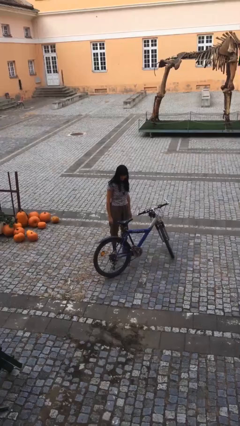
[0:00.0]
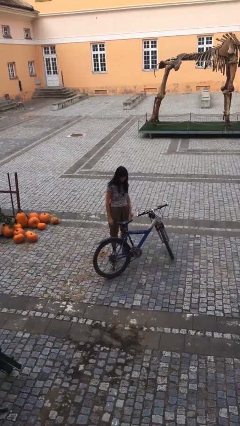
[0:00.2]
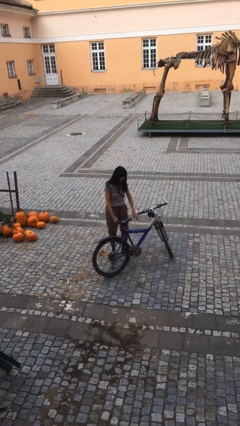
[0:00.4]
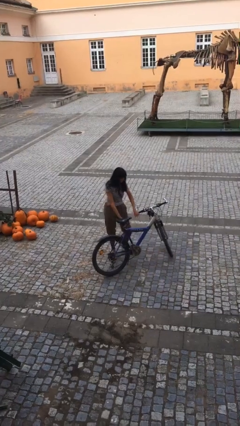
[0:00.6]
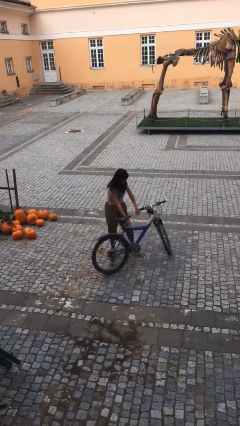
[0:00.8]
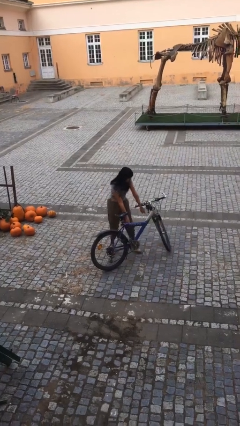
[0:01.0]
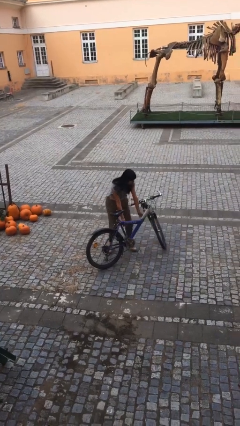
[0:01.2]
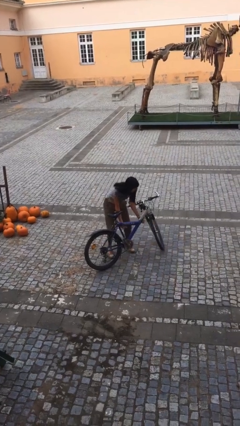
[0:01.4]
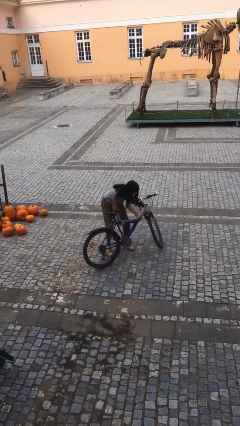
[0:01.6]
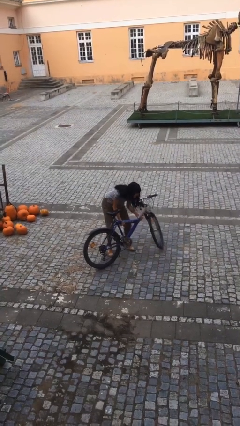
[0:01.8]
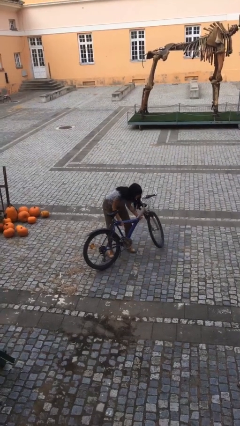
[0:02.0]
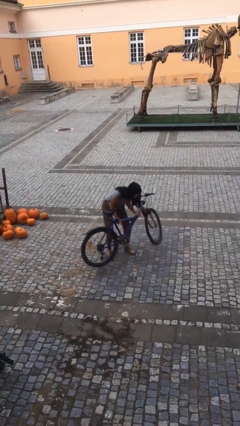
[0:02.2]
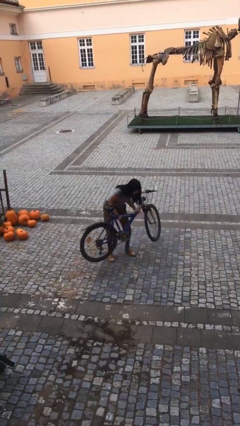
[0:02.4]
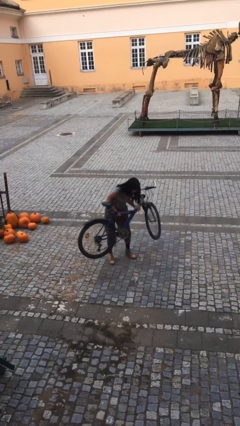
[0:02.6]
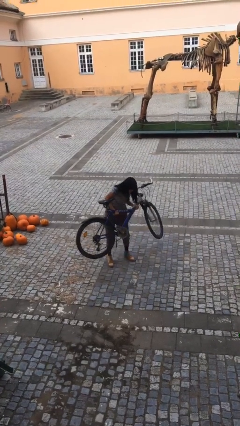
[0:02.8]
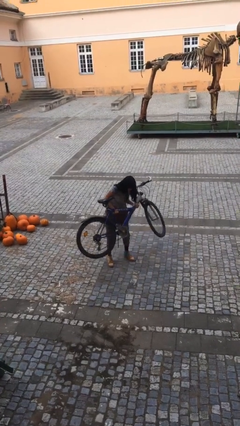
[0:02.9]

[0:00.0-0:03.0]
person picks up object from floor

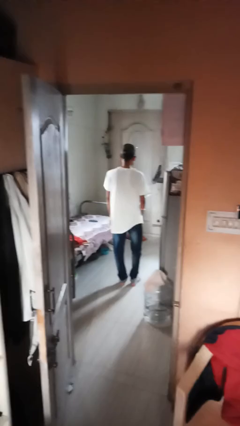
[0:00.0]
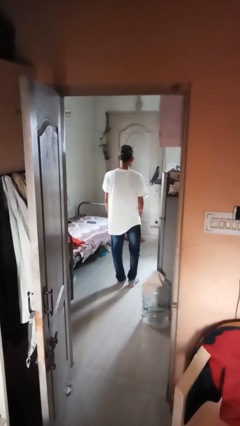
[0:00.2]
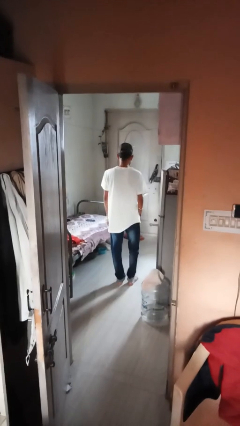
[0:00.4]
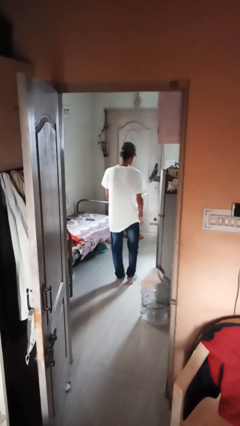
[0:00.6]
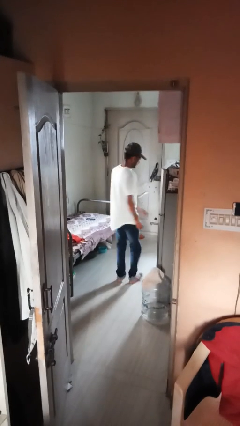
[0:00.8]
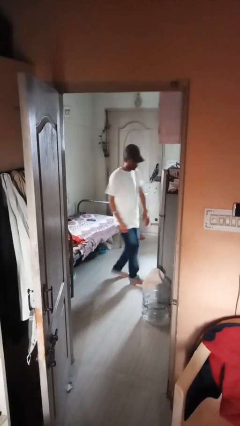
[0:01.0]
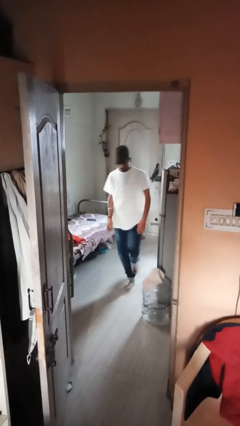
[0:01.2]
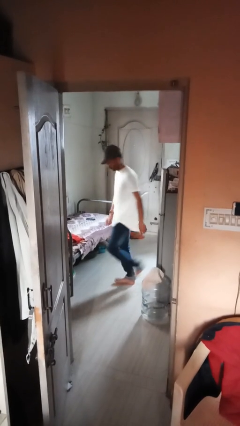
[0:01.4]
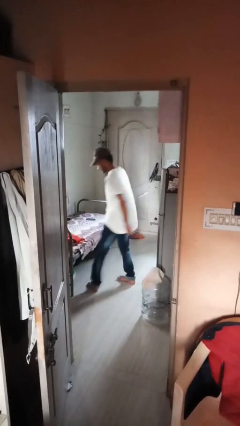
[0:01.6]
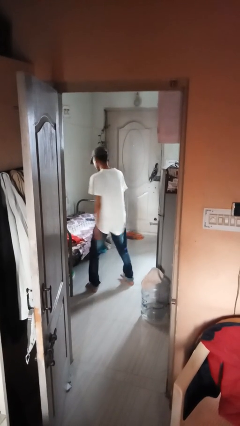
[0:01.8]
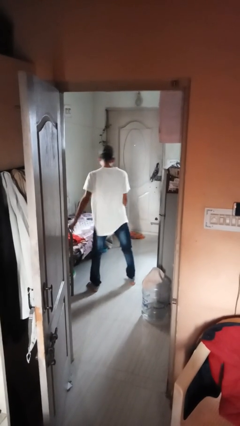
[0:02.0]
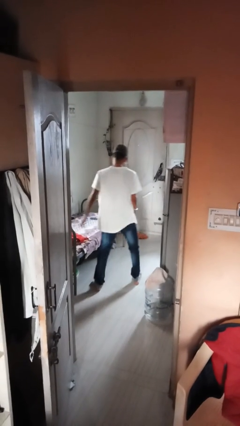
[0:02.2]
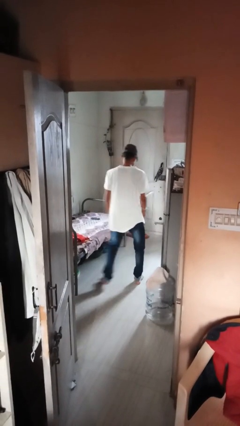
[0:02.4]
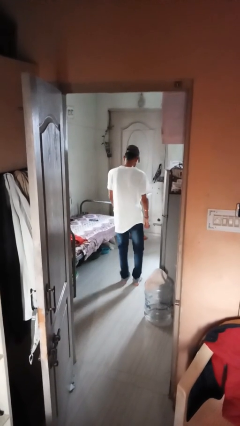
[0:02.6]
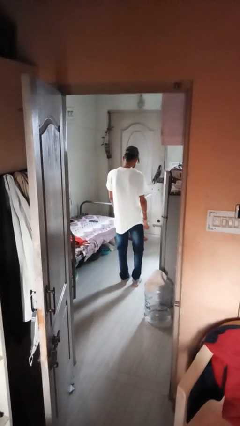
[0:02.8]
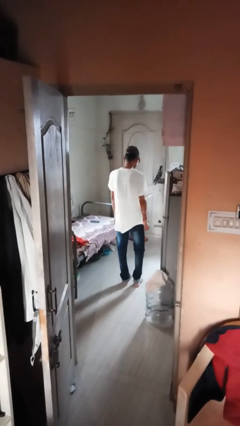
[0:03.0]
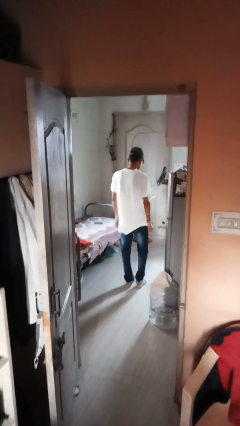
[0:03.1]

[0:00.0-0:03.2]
person twirls

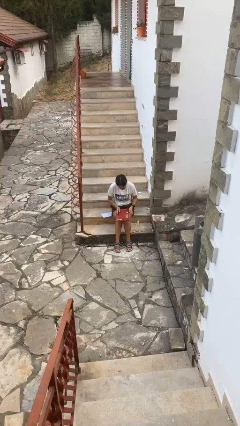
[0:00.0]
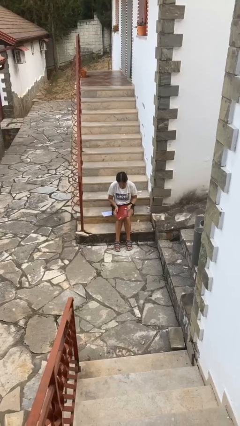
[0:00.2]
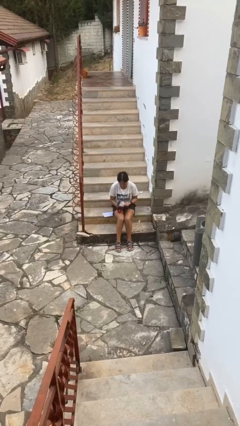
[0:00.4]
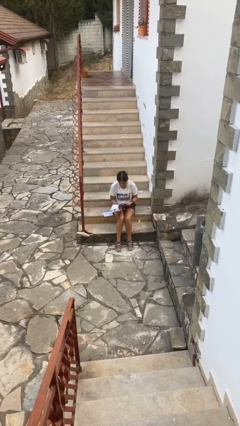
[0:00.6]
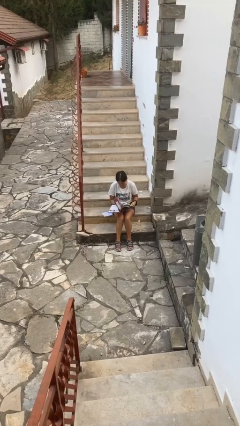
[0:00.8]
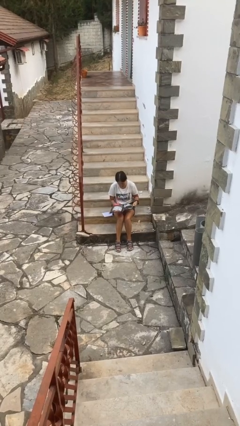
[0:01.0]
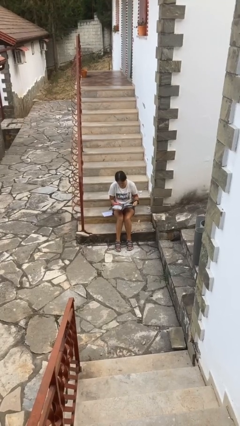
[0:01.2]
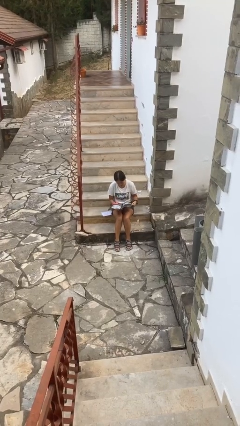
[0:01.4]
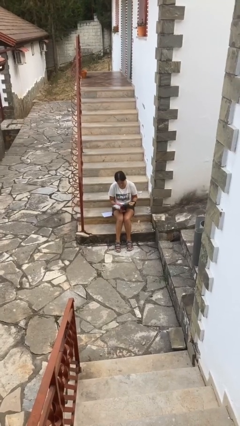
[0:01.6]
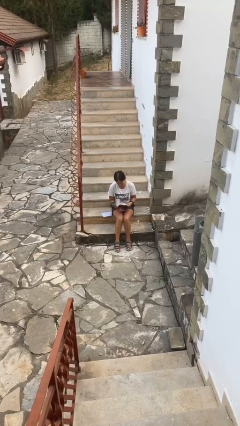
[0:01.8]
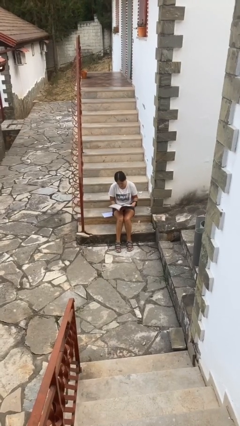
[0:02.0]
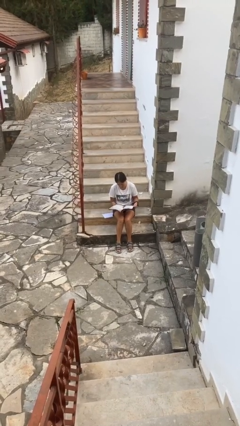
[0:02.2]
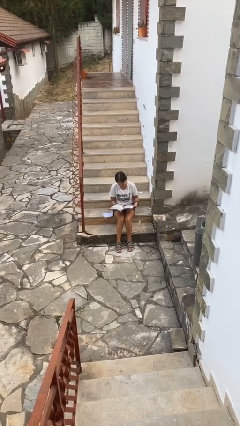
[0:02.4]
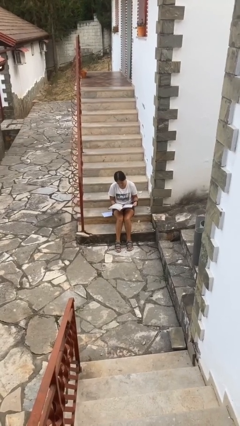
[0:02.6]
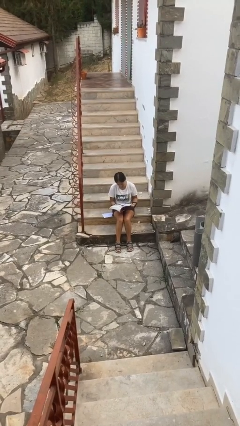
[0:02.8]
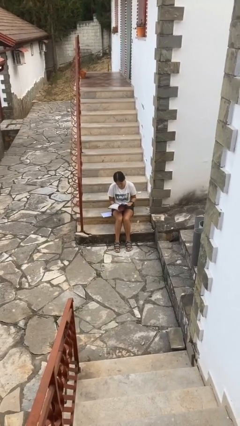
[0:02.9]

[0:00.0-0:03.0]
person reads magazine

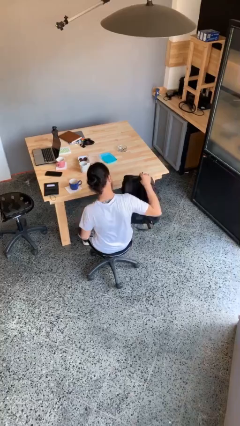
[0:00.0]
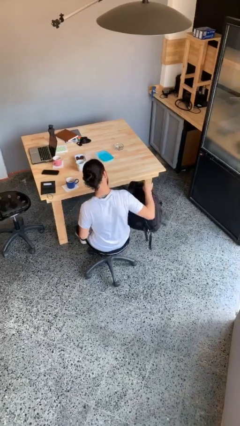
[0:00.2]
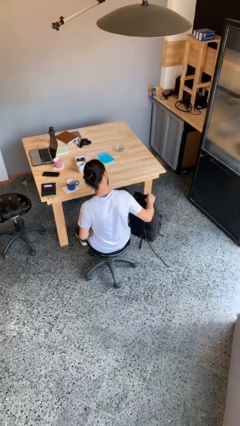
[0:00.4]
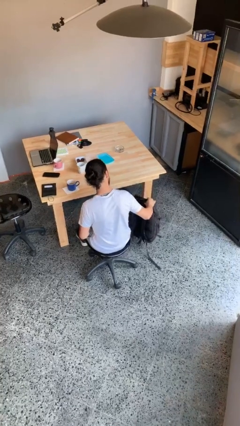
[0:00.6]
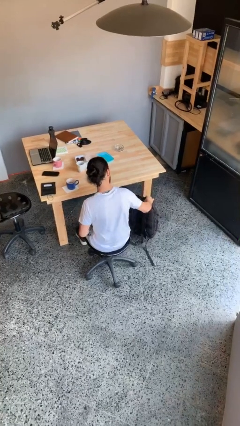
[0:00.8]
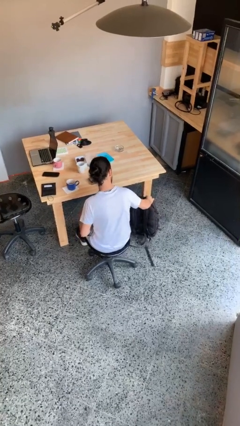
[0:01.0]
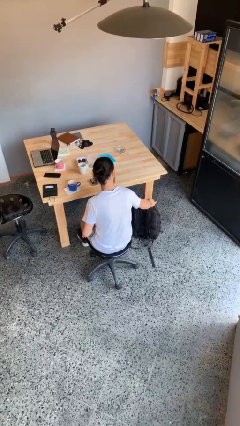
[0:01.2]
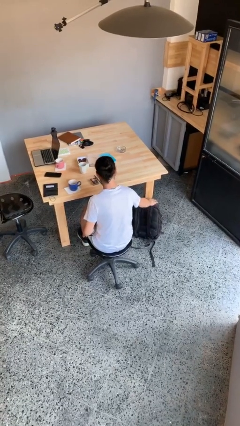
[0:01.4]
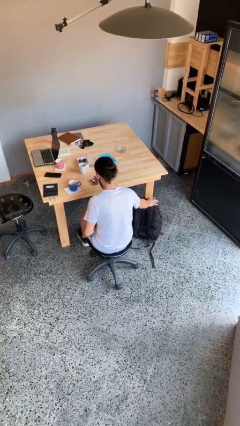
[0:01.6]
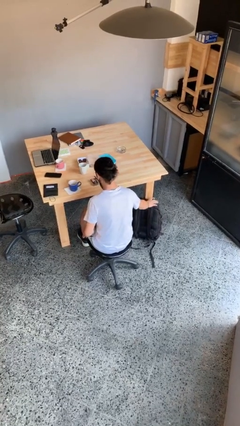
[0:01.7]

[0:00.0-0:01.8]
person puts down object on floor

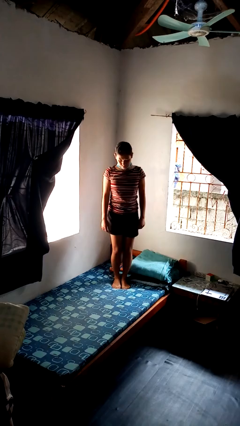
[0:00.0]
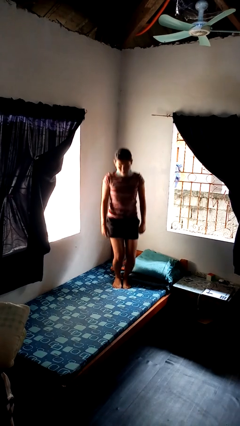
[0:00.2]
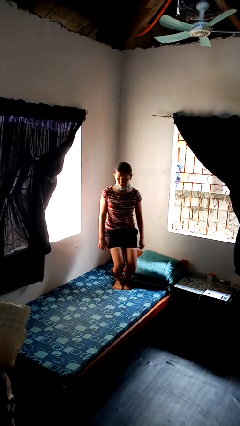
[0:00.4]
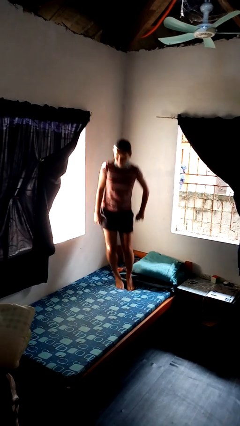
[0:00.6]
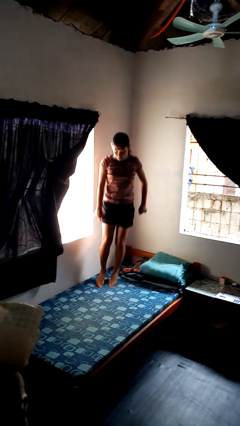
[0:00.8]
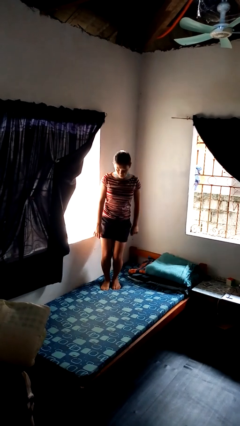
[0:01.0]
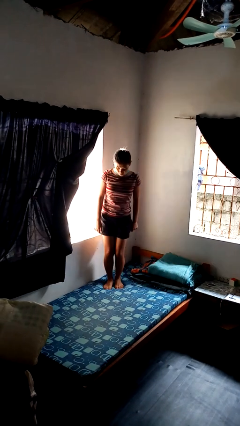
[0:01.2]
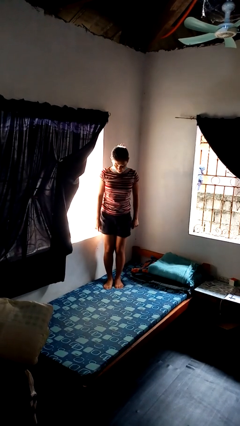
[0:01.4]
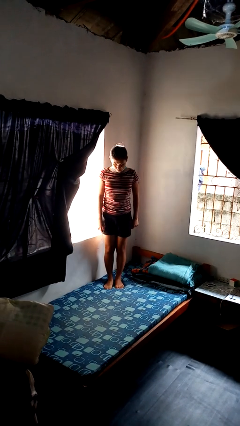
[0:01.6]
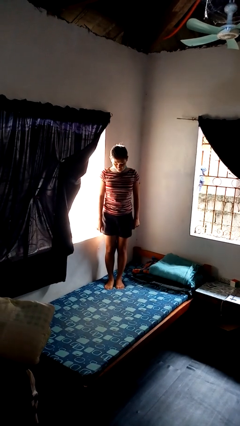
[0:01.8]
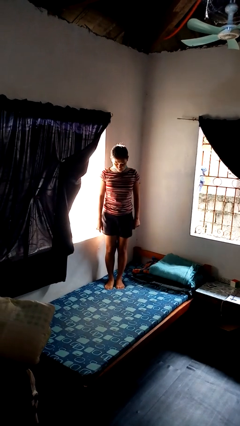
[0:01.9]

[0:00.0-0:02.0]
person jumps on bed

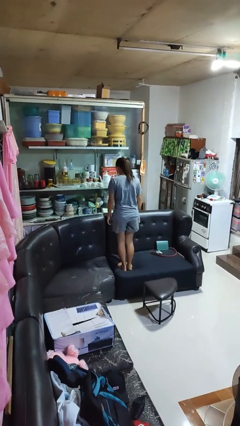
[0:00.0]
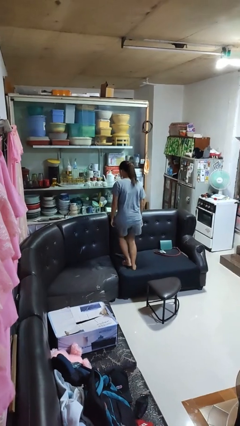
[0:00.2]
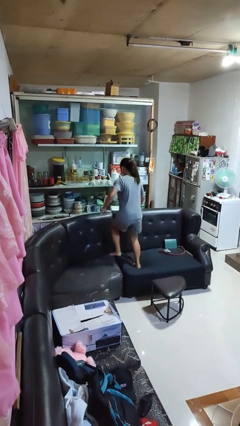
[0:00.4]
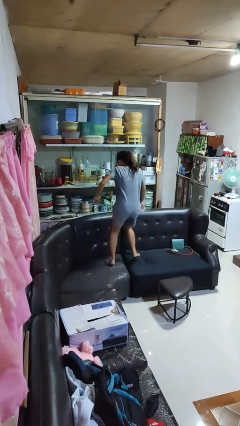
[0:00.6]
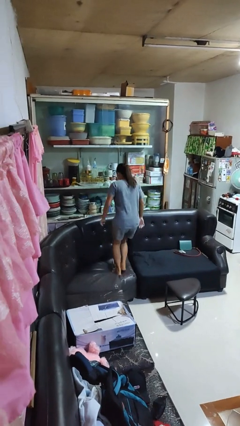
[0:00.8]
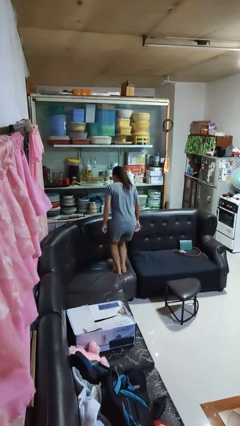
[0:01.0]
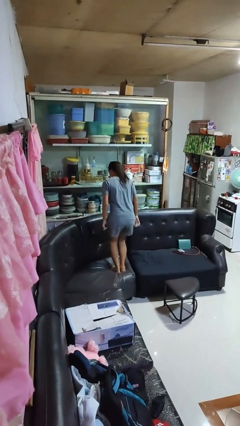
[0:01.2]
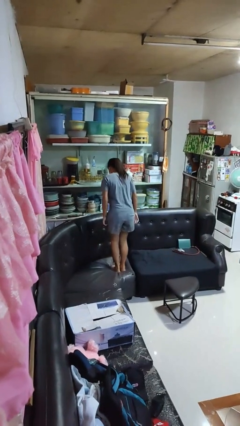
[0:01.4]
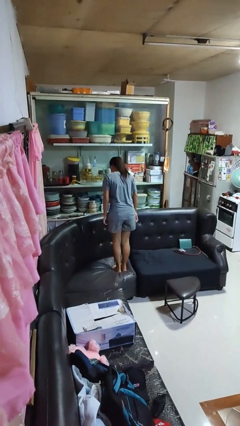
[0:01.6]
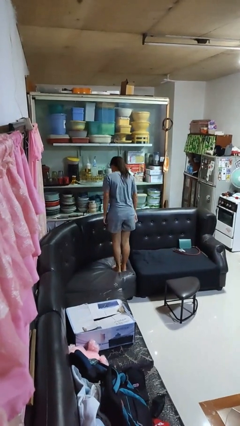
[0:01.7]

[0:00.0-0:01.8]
person jumps on couch

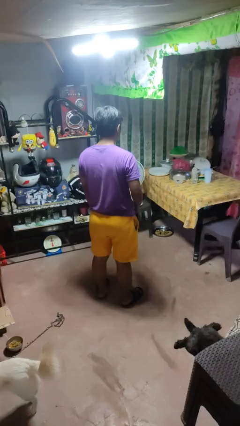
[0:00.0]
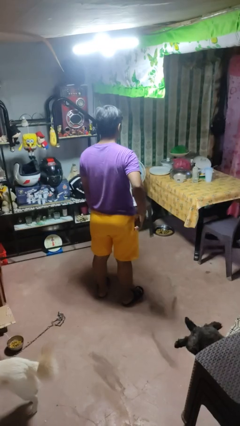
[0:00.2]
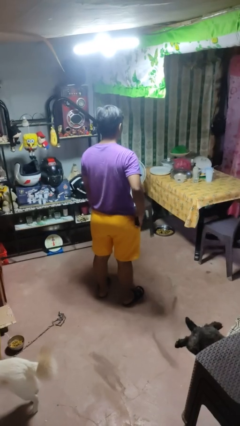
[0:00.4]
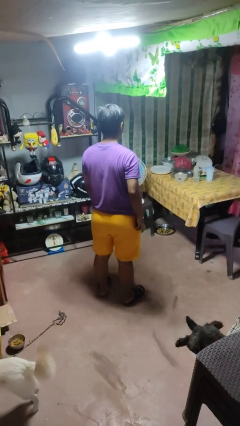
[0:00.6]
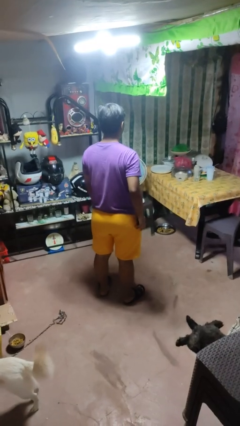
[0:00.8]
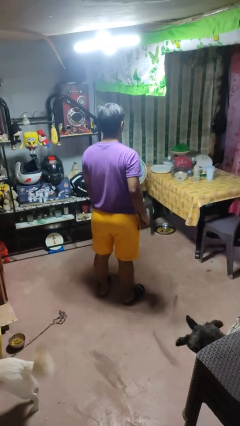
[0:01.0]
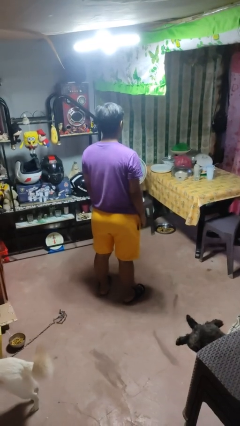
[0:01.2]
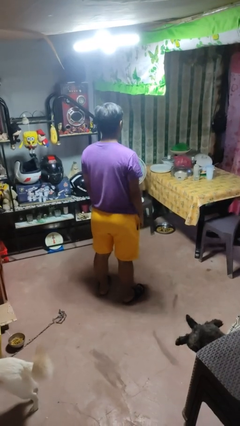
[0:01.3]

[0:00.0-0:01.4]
person puts phone into pocket

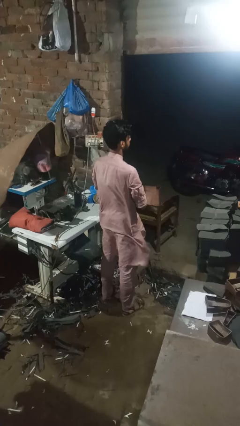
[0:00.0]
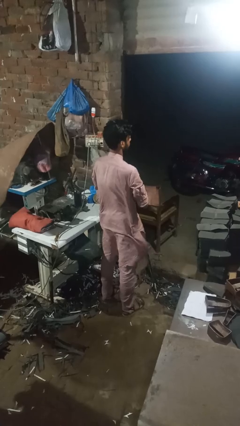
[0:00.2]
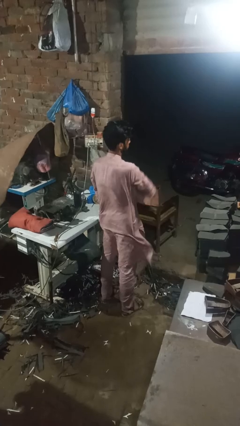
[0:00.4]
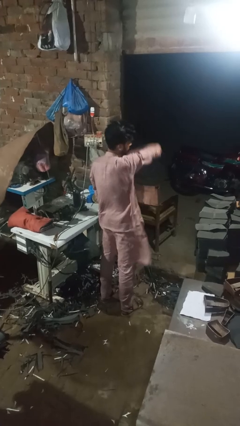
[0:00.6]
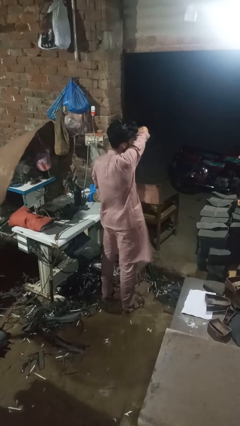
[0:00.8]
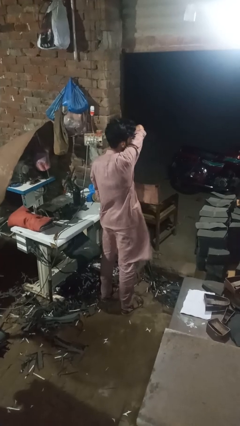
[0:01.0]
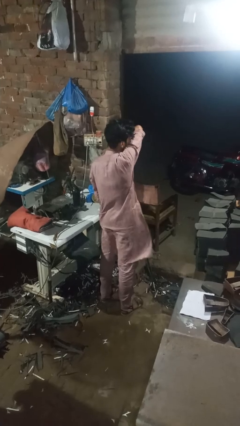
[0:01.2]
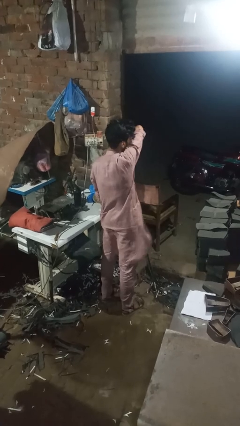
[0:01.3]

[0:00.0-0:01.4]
person sneezes into arm
